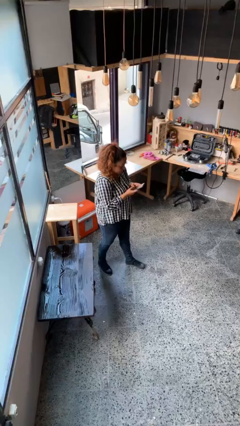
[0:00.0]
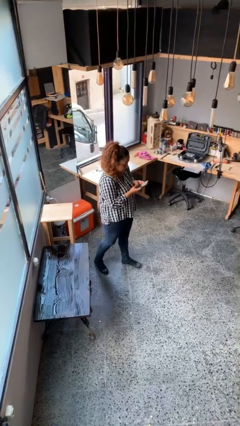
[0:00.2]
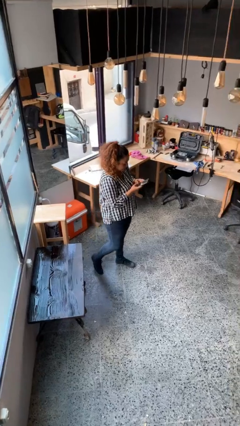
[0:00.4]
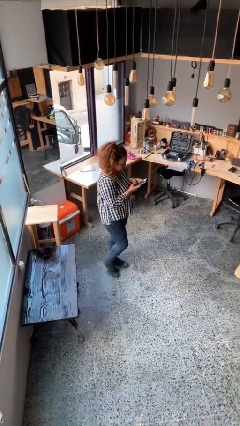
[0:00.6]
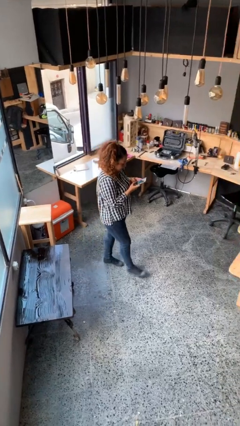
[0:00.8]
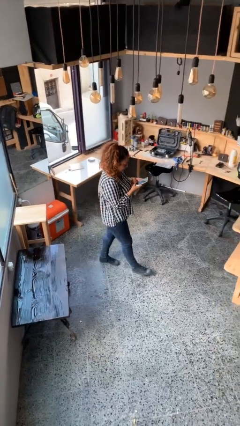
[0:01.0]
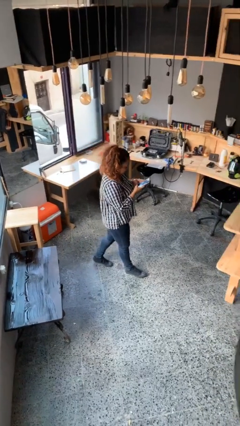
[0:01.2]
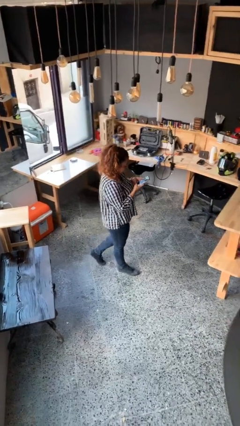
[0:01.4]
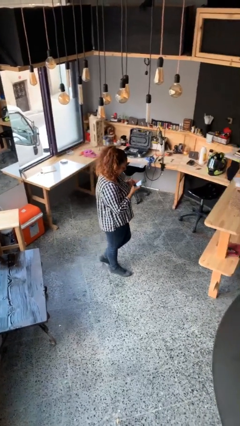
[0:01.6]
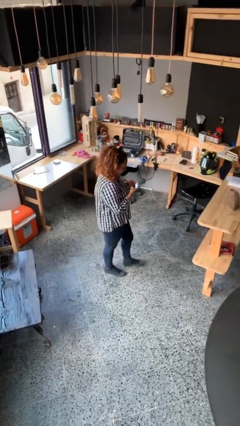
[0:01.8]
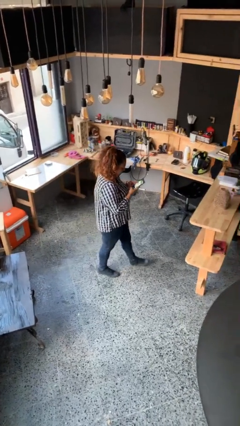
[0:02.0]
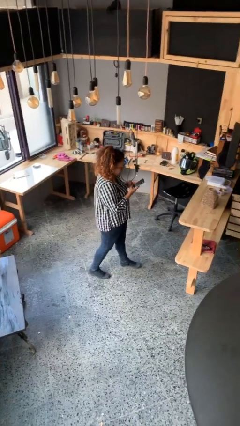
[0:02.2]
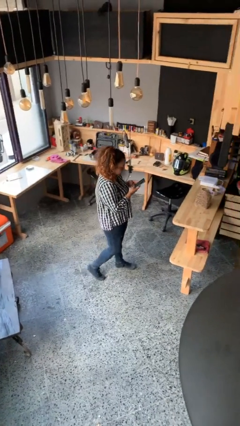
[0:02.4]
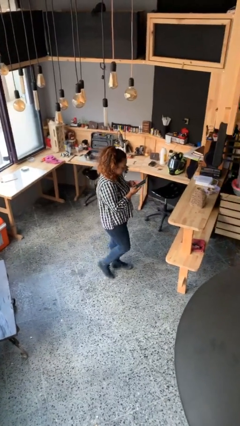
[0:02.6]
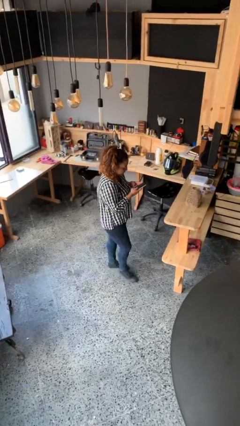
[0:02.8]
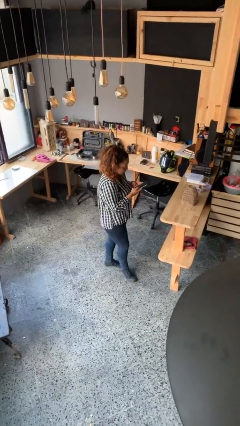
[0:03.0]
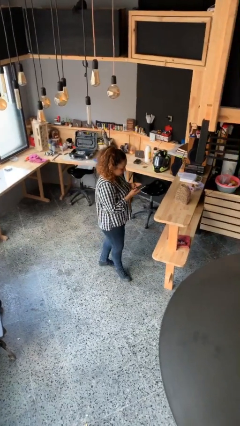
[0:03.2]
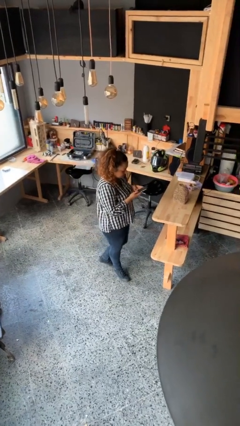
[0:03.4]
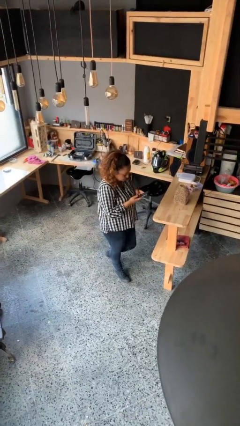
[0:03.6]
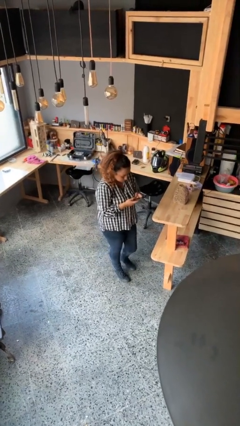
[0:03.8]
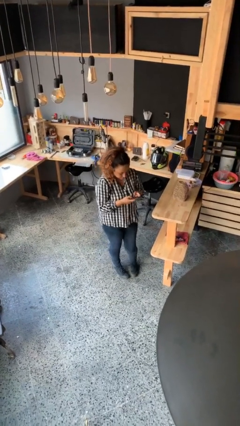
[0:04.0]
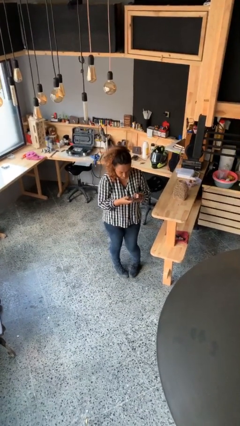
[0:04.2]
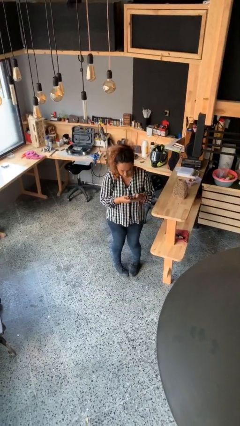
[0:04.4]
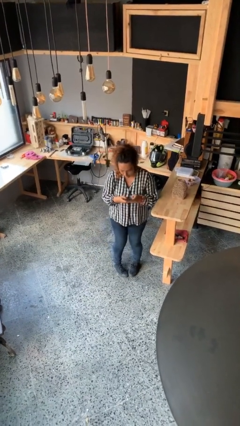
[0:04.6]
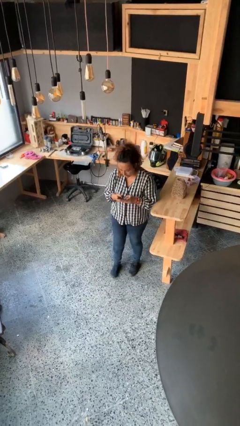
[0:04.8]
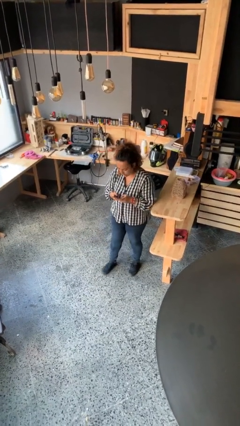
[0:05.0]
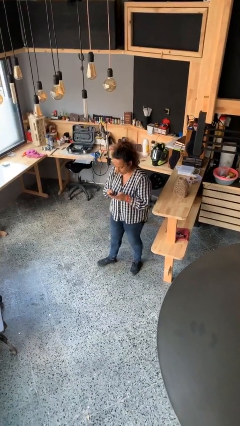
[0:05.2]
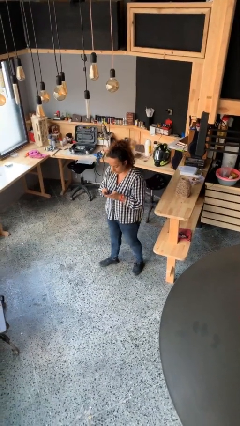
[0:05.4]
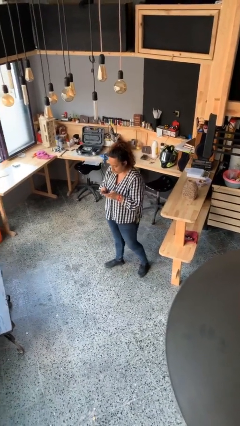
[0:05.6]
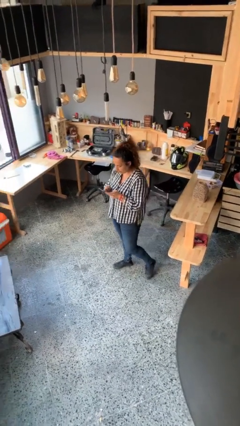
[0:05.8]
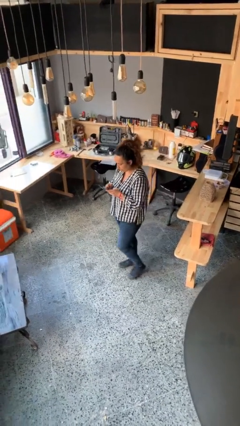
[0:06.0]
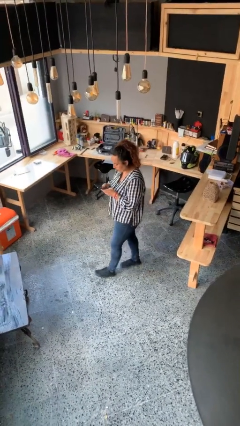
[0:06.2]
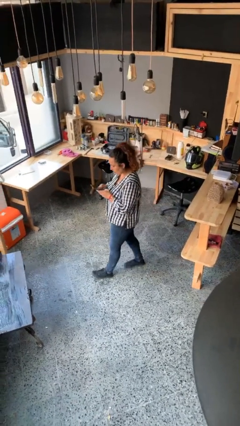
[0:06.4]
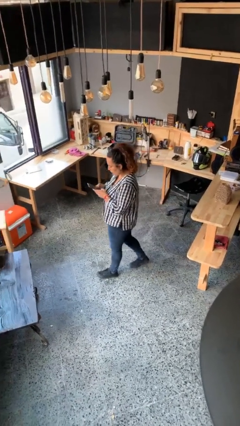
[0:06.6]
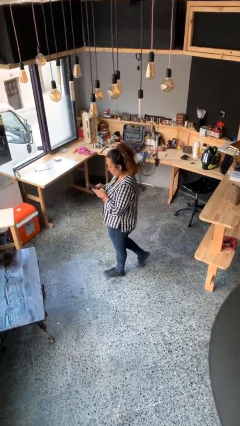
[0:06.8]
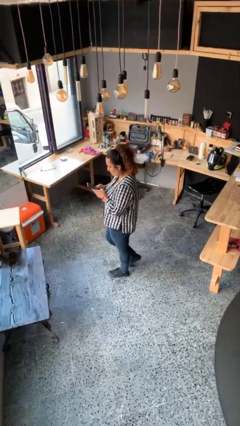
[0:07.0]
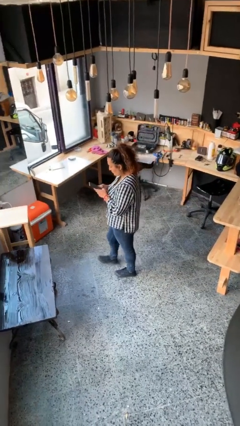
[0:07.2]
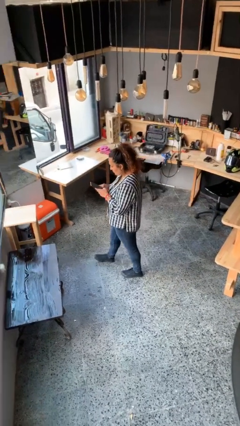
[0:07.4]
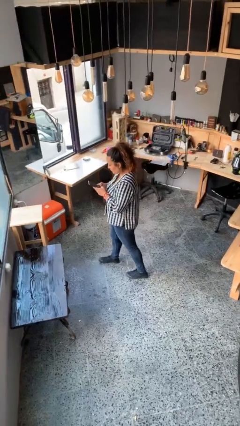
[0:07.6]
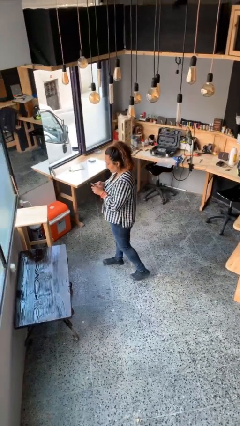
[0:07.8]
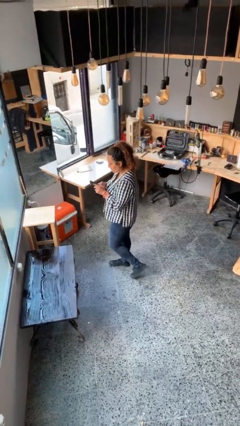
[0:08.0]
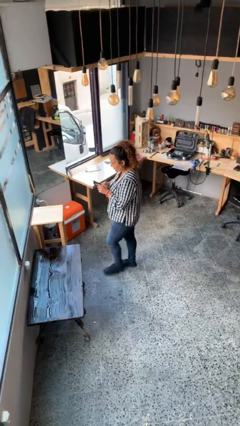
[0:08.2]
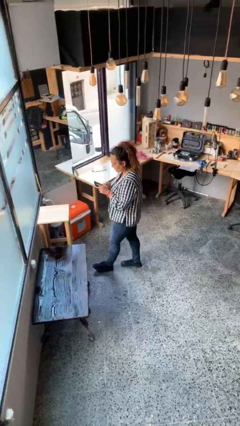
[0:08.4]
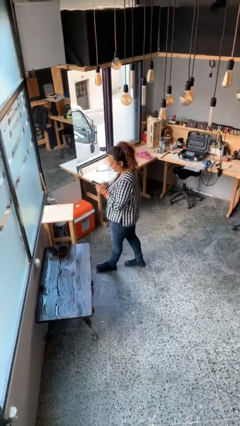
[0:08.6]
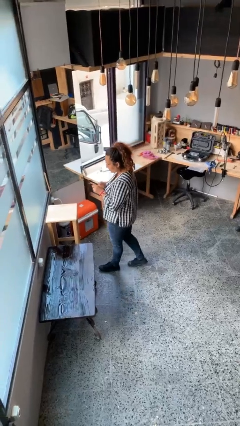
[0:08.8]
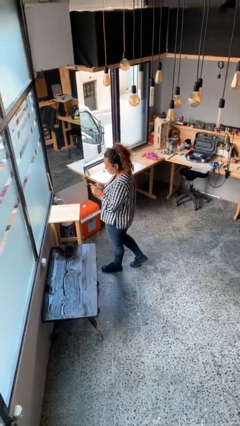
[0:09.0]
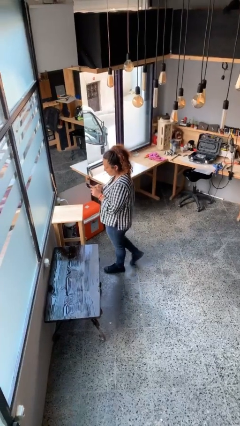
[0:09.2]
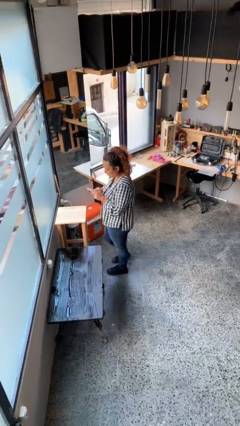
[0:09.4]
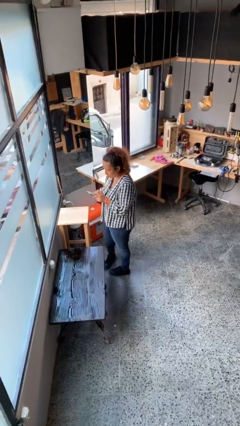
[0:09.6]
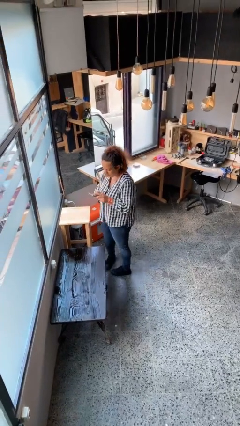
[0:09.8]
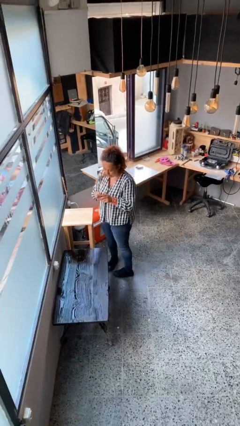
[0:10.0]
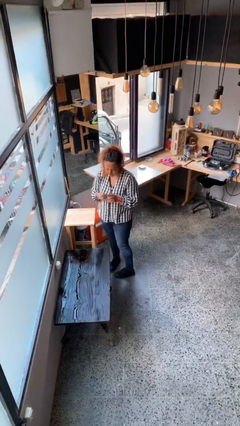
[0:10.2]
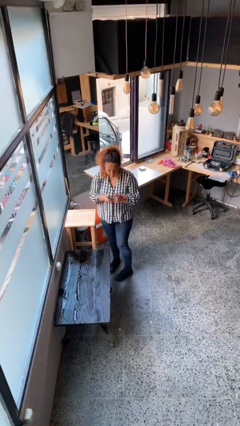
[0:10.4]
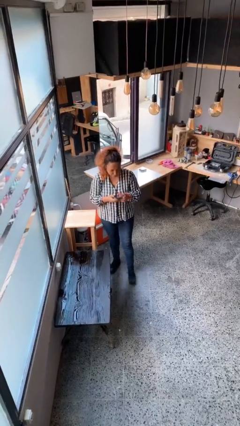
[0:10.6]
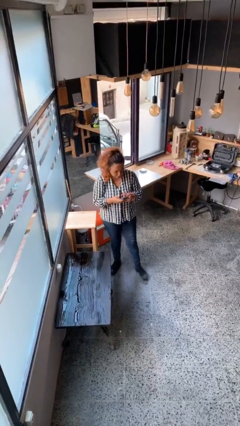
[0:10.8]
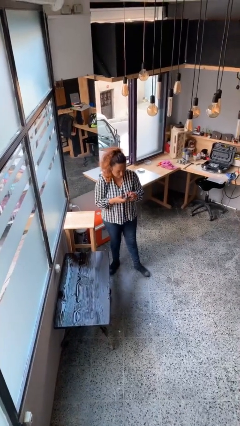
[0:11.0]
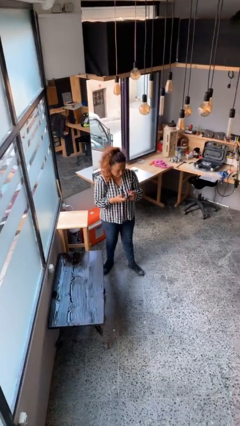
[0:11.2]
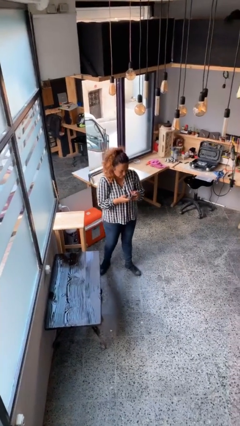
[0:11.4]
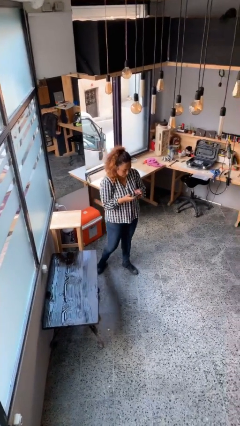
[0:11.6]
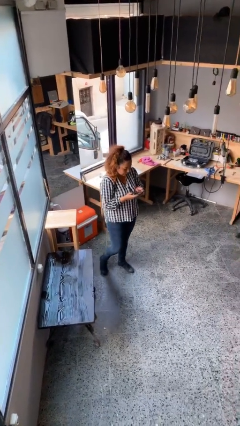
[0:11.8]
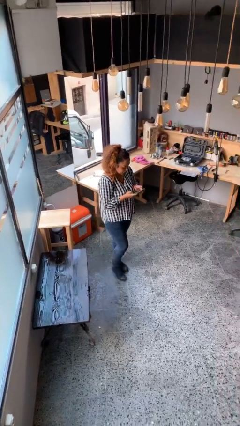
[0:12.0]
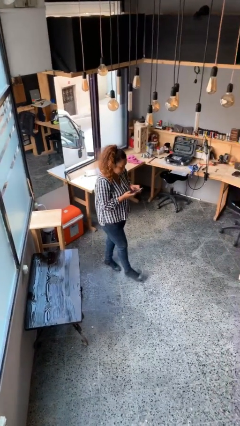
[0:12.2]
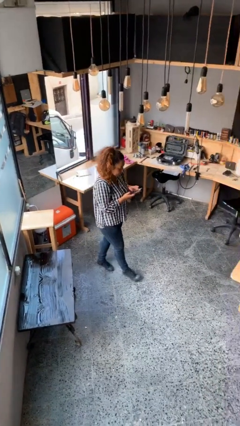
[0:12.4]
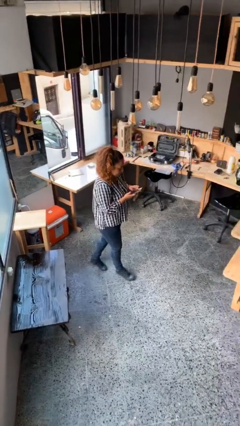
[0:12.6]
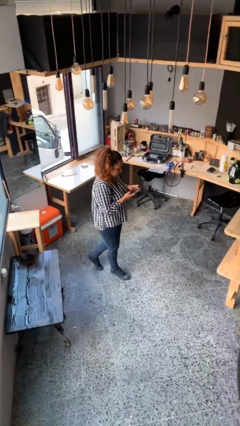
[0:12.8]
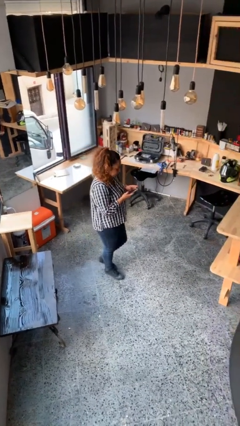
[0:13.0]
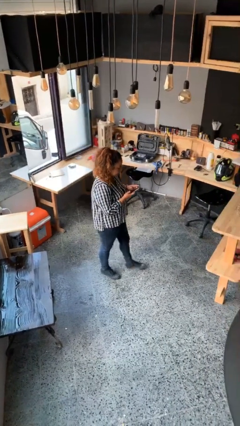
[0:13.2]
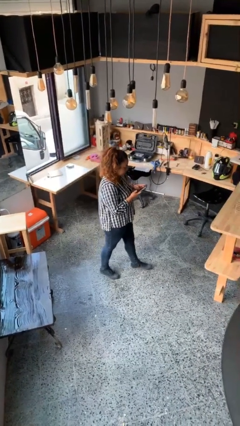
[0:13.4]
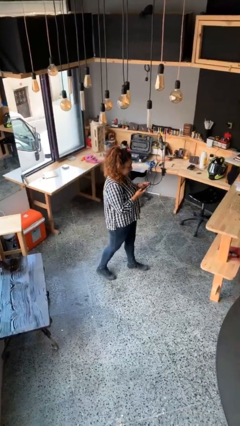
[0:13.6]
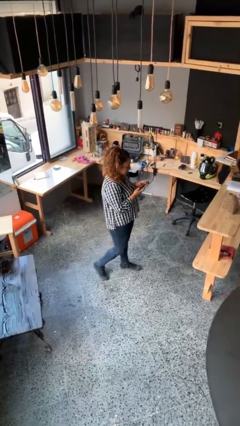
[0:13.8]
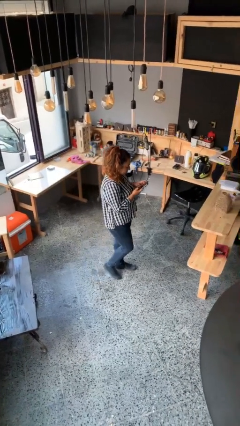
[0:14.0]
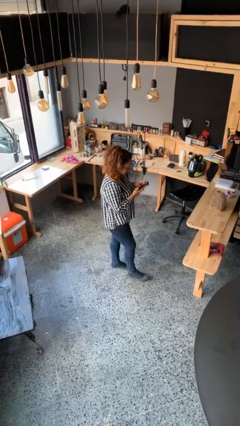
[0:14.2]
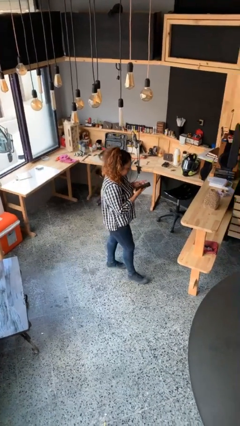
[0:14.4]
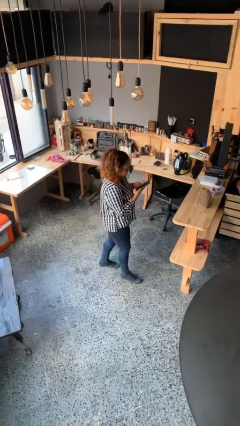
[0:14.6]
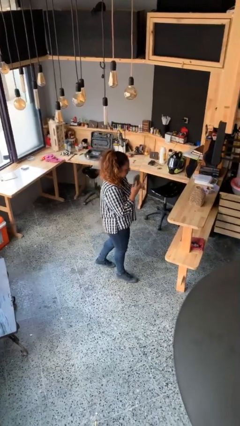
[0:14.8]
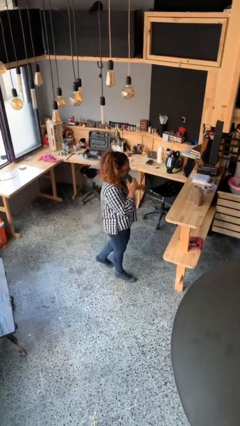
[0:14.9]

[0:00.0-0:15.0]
person texts on phone

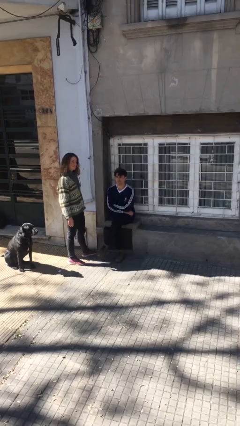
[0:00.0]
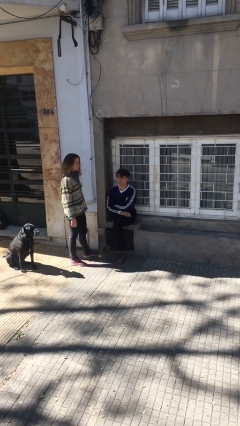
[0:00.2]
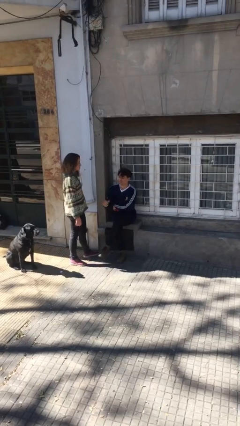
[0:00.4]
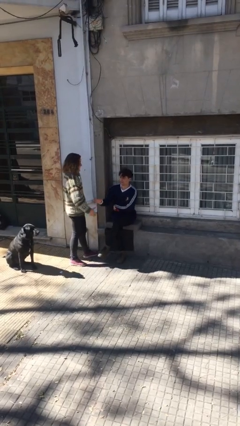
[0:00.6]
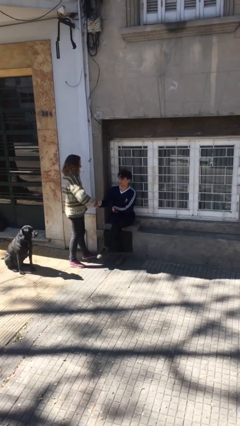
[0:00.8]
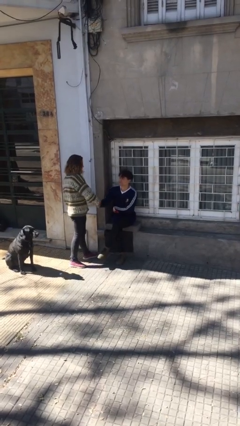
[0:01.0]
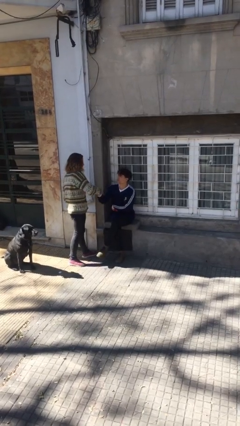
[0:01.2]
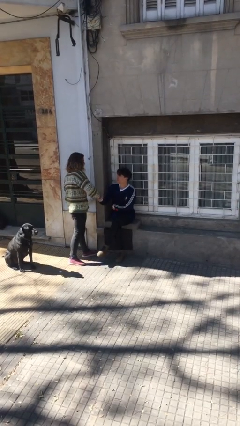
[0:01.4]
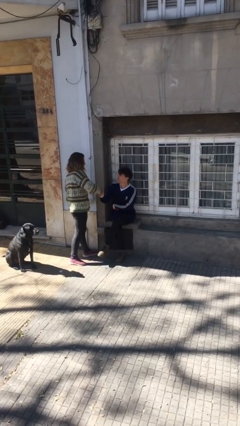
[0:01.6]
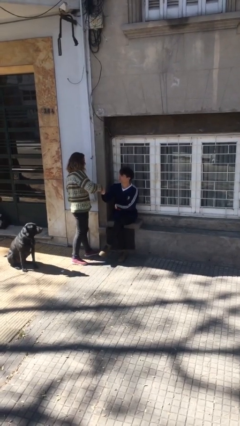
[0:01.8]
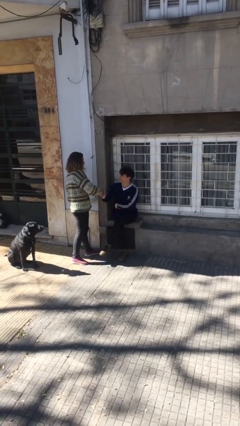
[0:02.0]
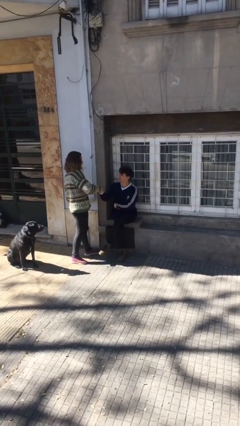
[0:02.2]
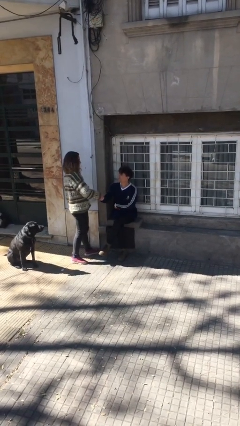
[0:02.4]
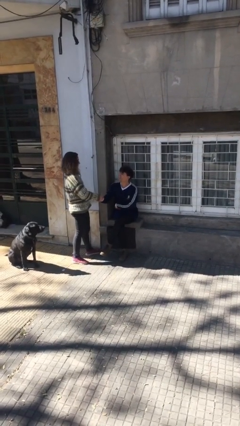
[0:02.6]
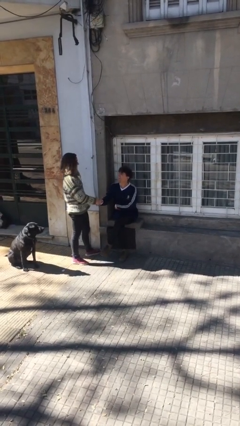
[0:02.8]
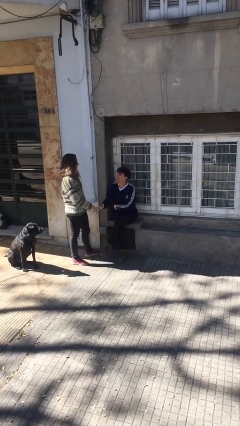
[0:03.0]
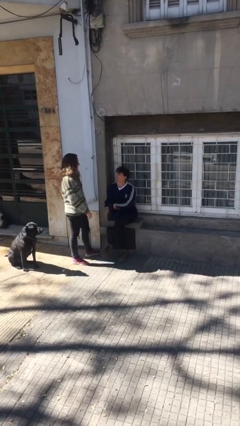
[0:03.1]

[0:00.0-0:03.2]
person shakes hand
